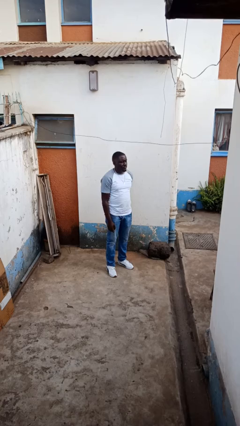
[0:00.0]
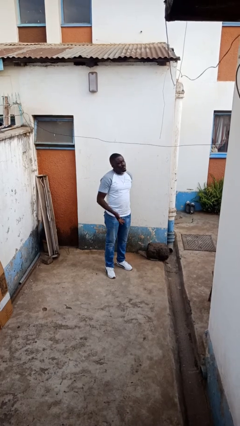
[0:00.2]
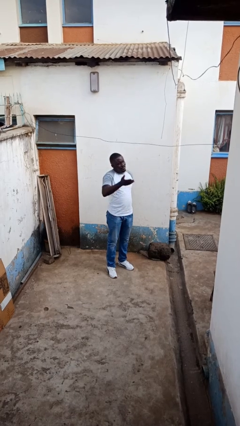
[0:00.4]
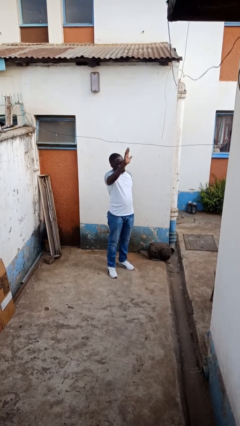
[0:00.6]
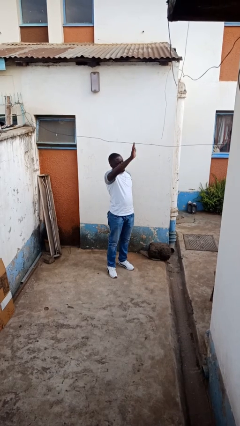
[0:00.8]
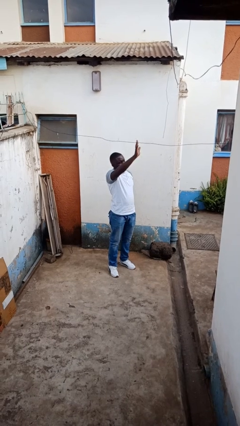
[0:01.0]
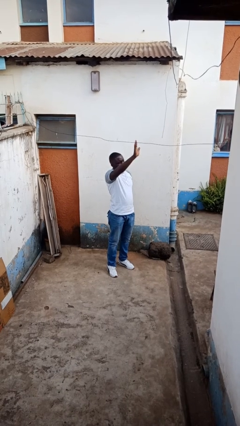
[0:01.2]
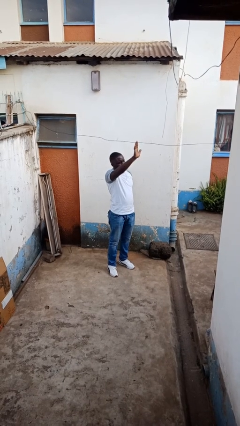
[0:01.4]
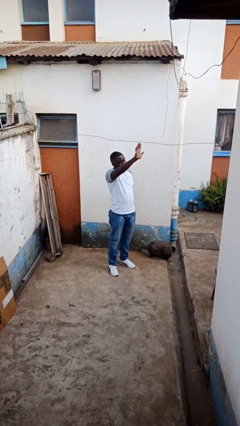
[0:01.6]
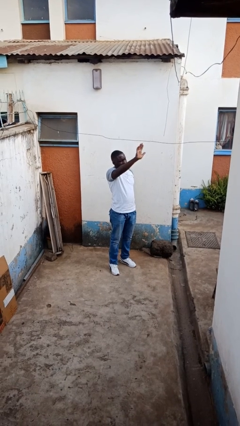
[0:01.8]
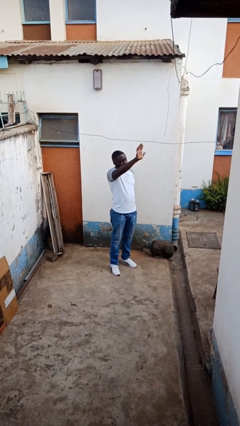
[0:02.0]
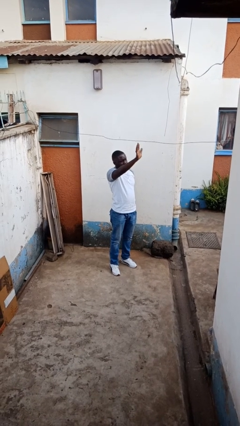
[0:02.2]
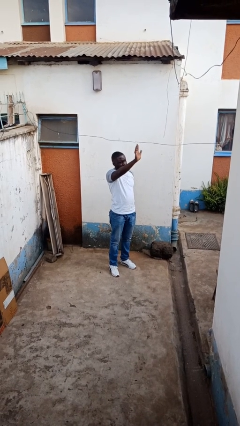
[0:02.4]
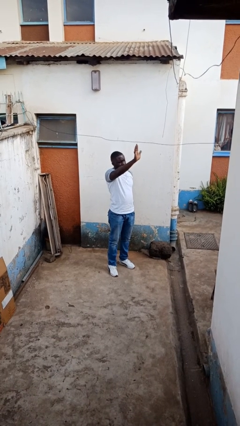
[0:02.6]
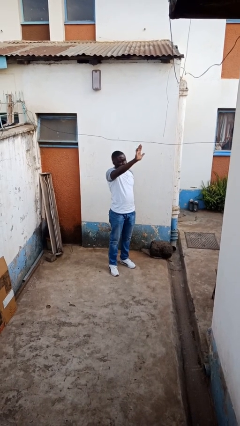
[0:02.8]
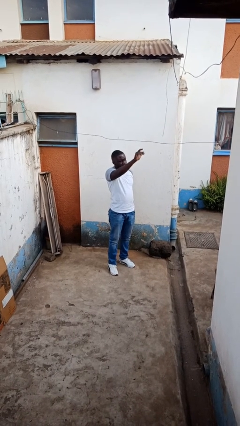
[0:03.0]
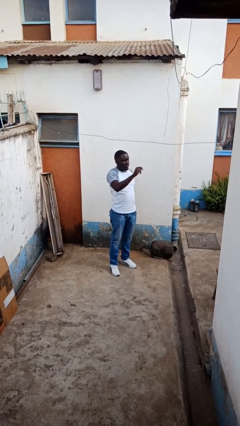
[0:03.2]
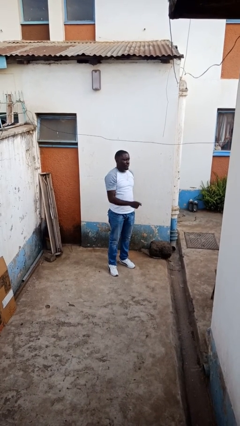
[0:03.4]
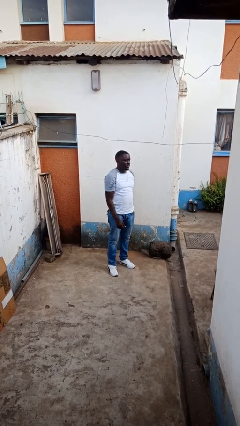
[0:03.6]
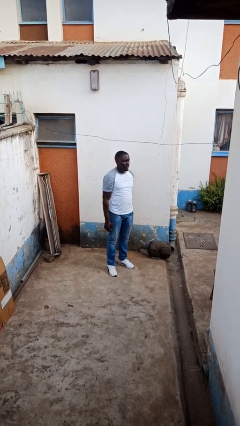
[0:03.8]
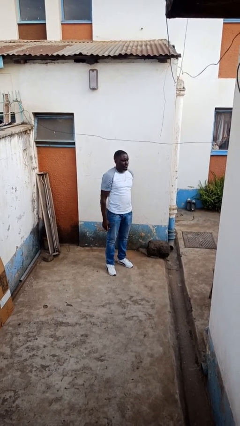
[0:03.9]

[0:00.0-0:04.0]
person waves at person

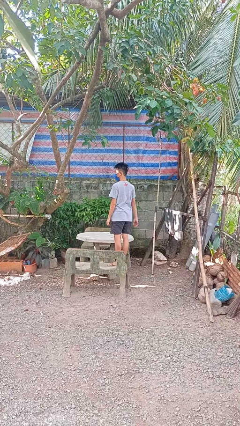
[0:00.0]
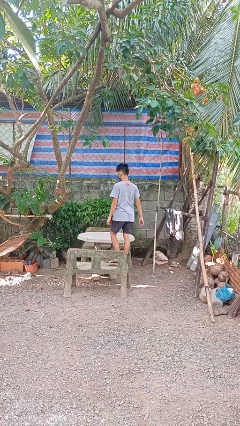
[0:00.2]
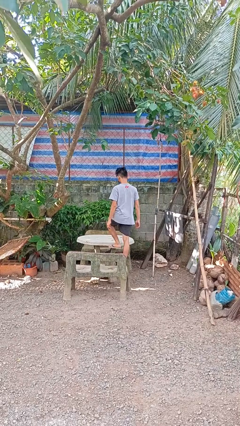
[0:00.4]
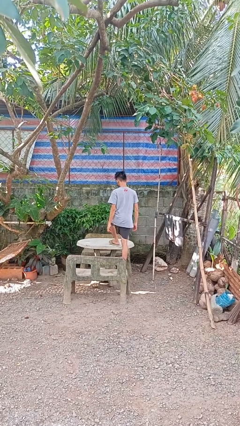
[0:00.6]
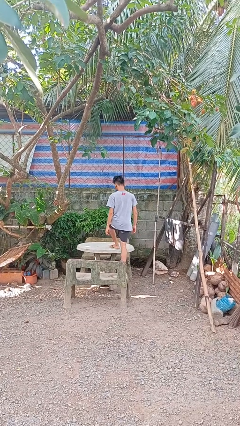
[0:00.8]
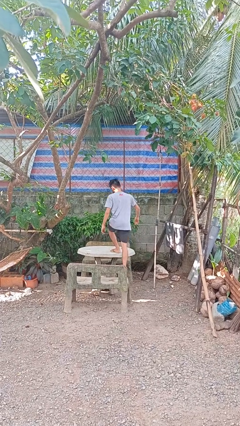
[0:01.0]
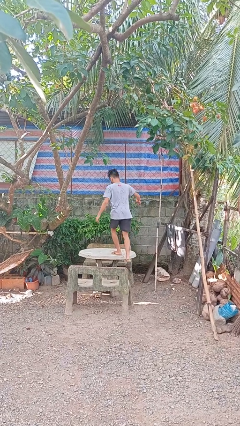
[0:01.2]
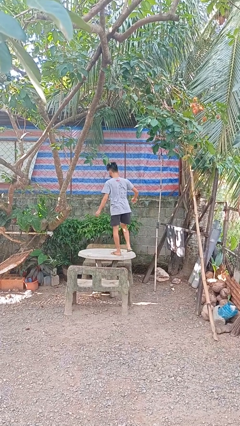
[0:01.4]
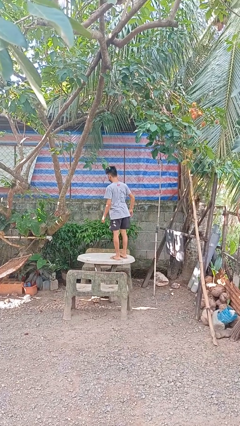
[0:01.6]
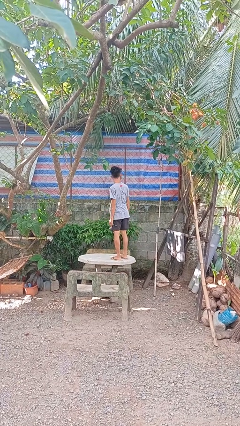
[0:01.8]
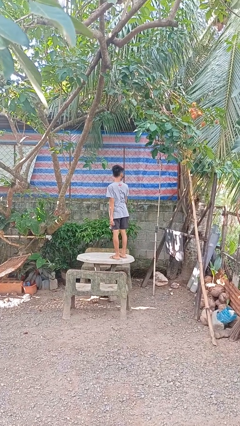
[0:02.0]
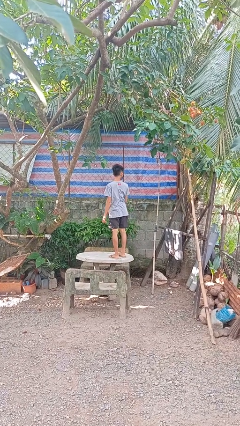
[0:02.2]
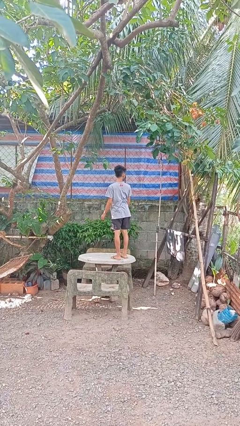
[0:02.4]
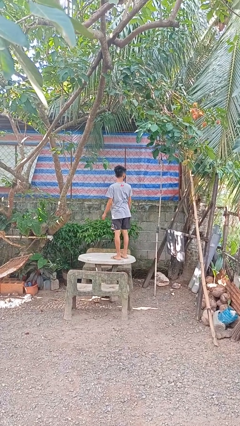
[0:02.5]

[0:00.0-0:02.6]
person climbs on table

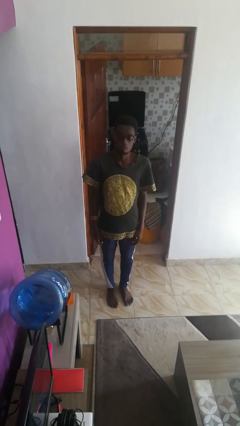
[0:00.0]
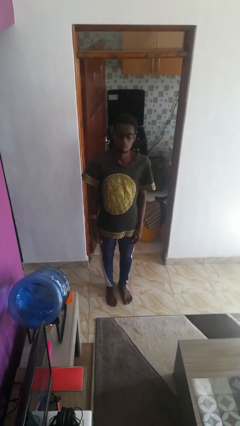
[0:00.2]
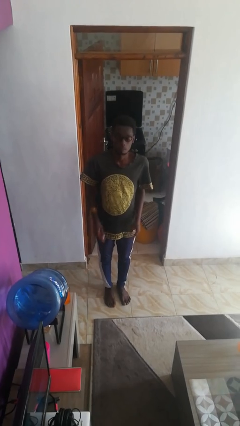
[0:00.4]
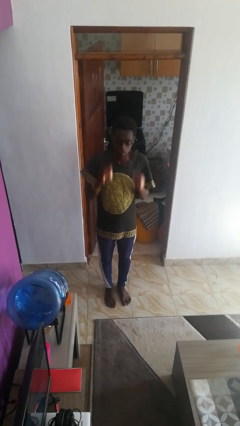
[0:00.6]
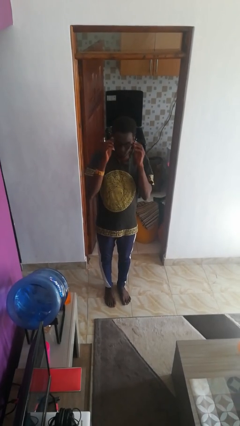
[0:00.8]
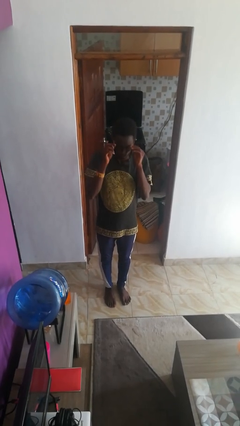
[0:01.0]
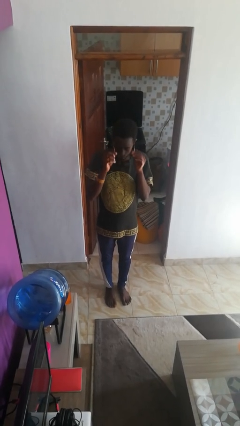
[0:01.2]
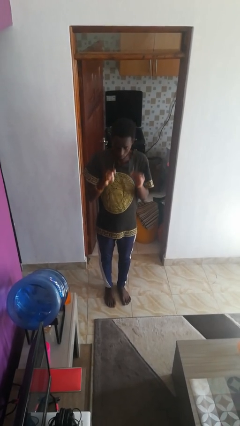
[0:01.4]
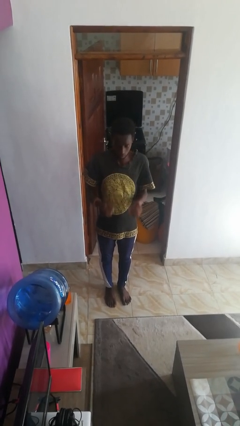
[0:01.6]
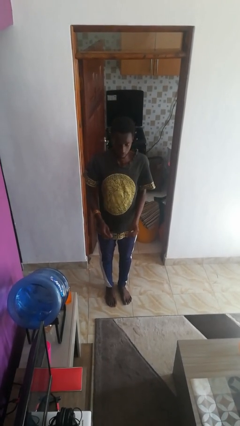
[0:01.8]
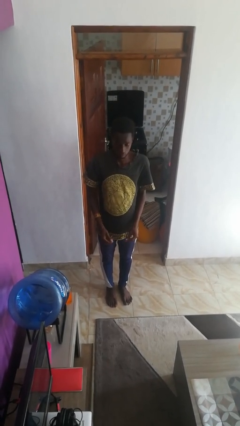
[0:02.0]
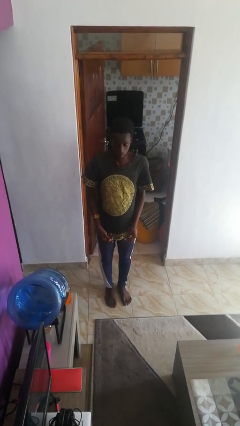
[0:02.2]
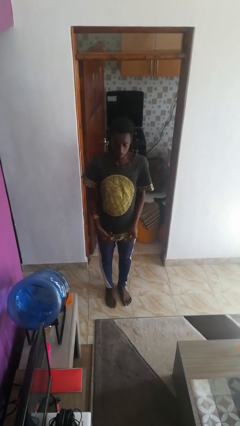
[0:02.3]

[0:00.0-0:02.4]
person takes off glasses

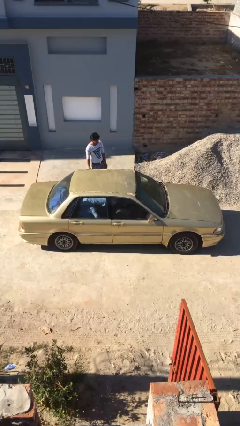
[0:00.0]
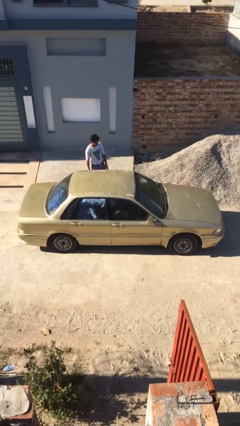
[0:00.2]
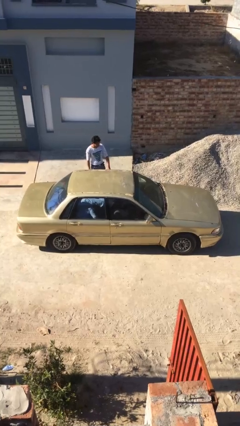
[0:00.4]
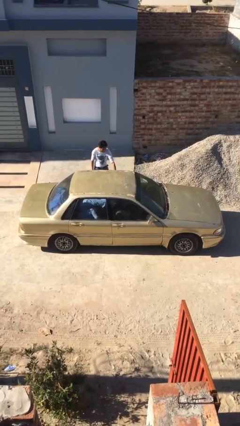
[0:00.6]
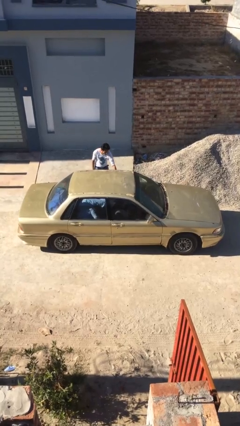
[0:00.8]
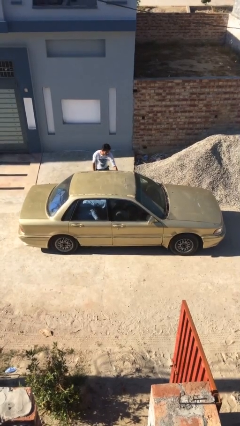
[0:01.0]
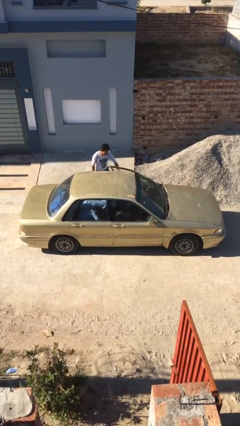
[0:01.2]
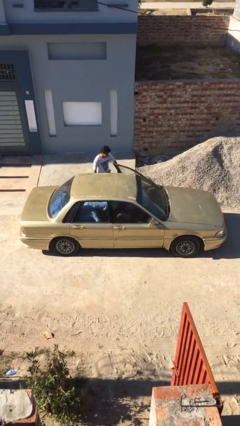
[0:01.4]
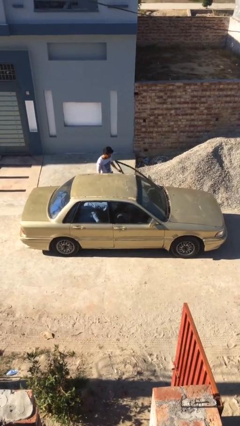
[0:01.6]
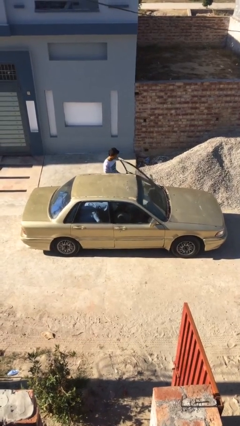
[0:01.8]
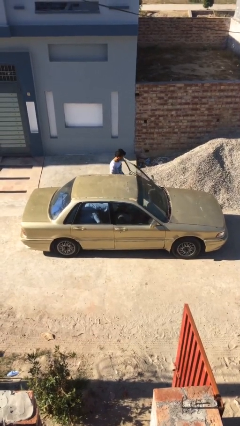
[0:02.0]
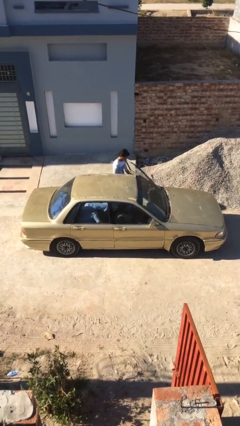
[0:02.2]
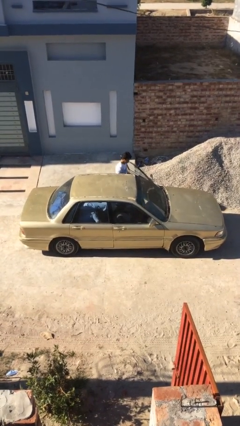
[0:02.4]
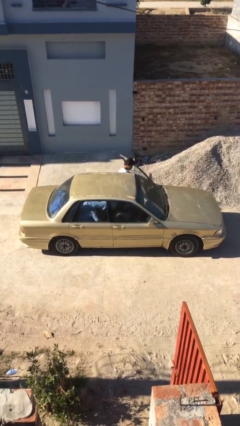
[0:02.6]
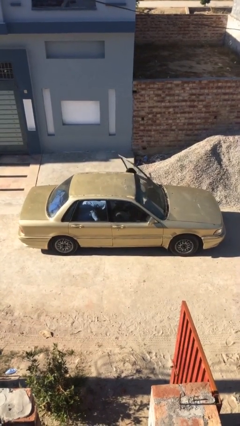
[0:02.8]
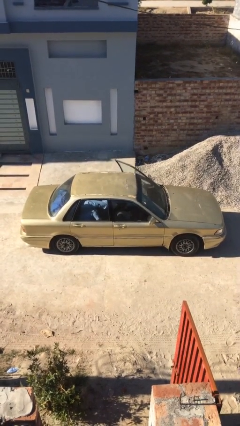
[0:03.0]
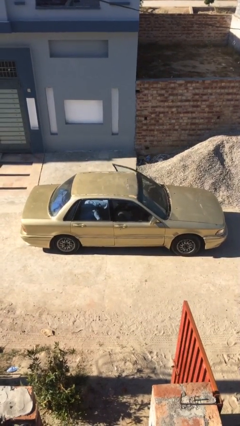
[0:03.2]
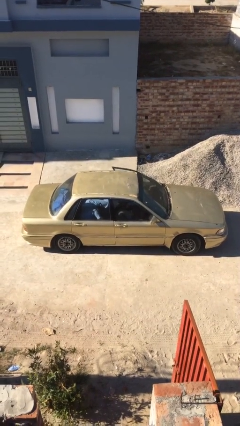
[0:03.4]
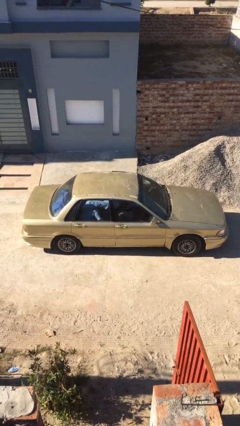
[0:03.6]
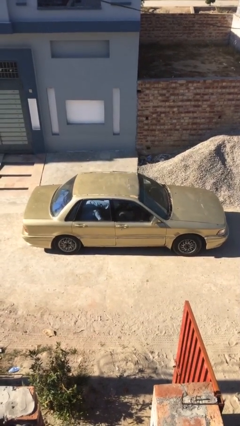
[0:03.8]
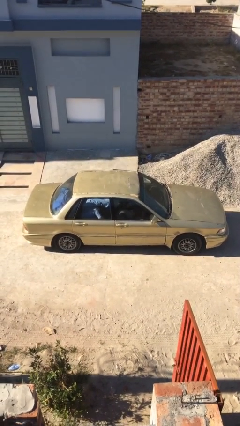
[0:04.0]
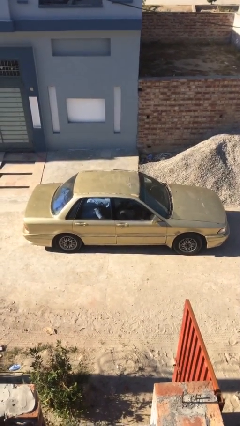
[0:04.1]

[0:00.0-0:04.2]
car picks up person

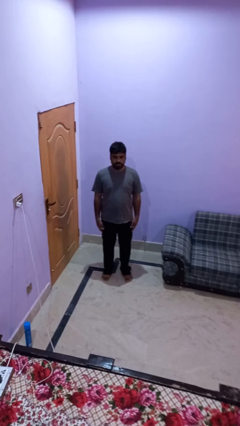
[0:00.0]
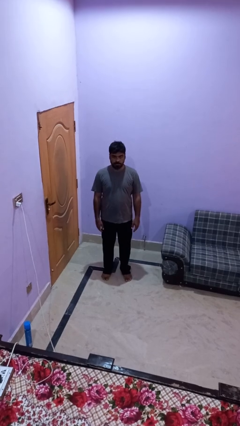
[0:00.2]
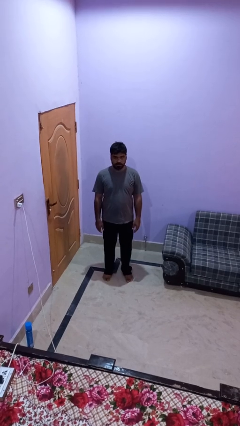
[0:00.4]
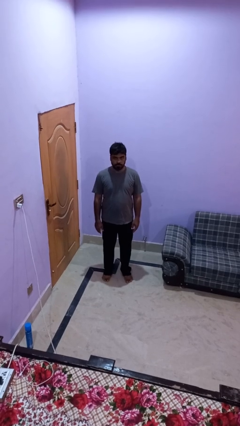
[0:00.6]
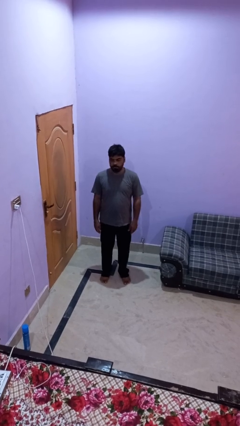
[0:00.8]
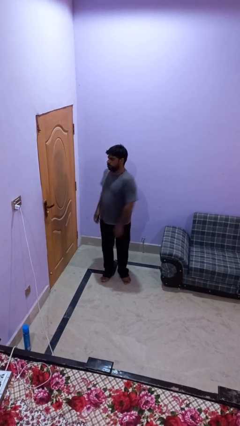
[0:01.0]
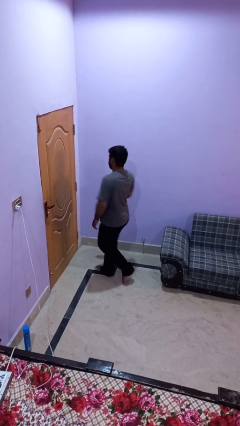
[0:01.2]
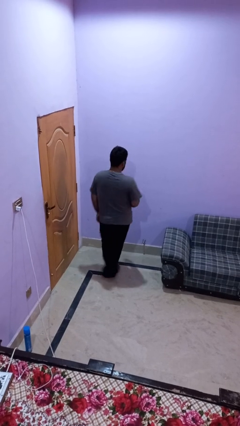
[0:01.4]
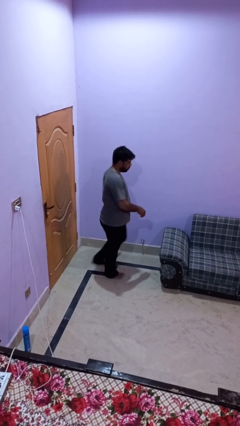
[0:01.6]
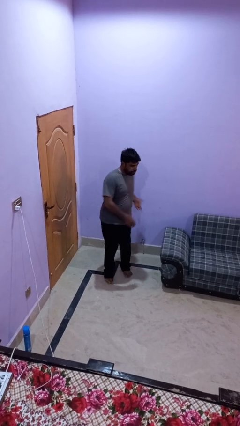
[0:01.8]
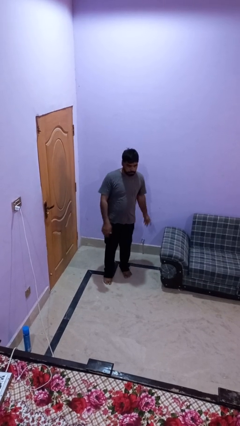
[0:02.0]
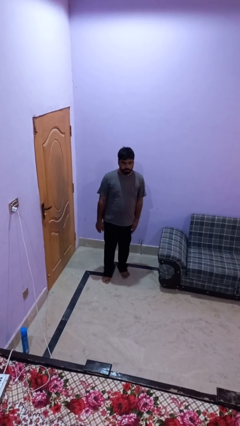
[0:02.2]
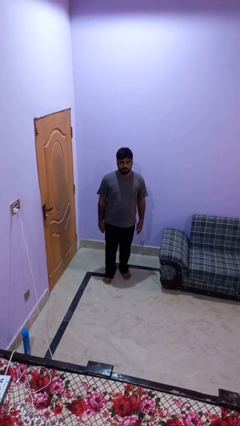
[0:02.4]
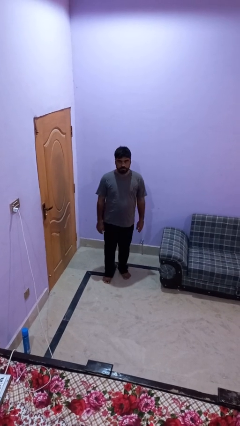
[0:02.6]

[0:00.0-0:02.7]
person twirls

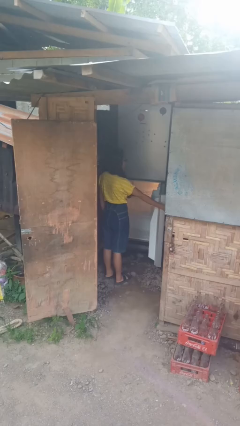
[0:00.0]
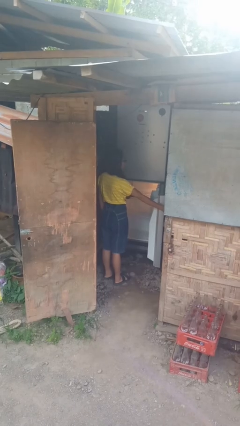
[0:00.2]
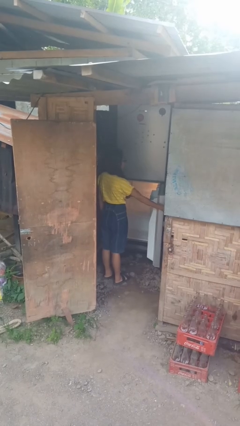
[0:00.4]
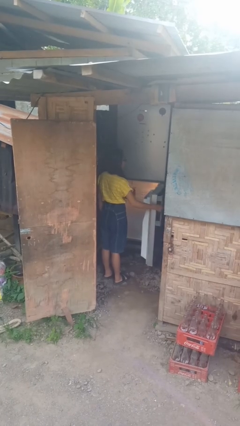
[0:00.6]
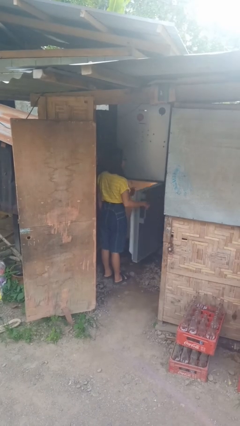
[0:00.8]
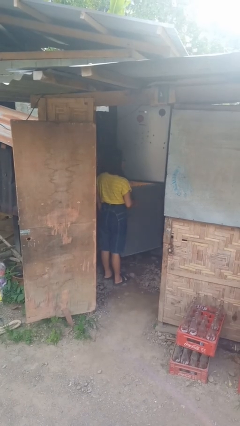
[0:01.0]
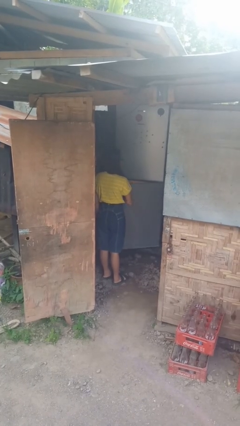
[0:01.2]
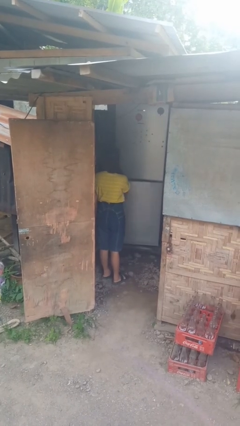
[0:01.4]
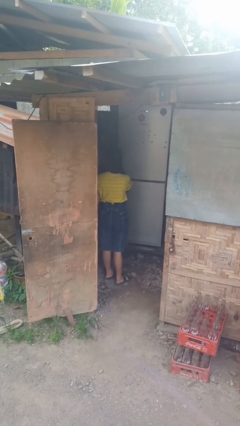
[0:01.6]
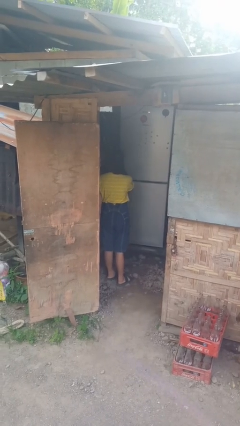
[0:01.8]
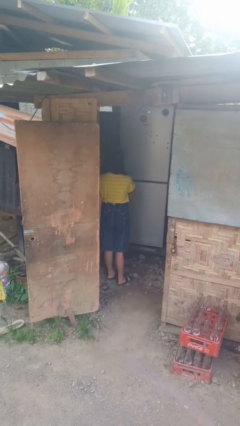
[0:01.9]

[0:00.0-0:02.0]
person closes refrigerator
